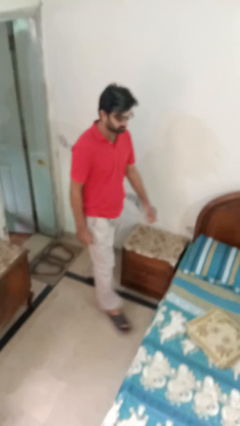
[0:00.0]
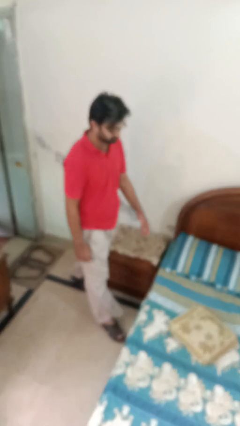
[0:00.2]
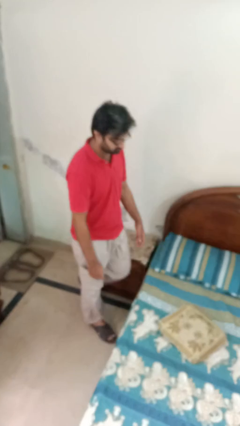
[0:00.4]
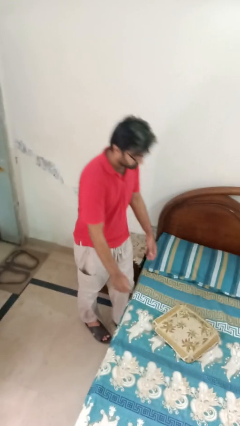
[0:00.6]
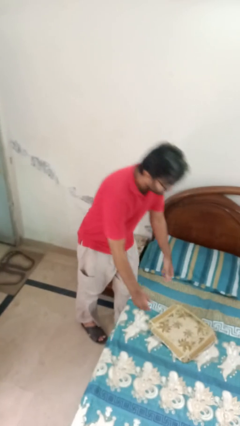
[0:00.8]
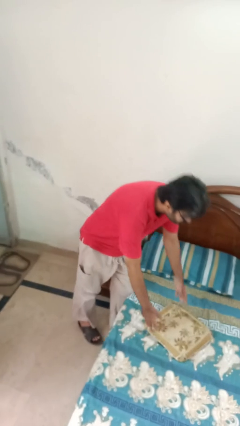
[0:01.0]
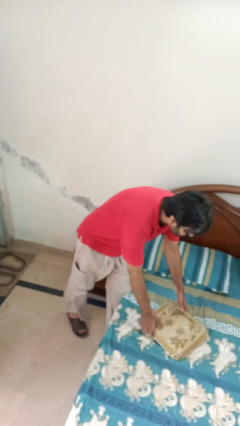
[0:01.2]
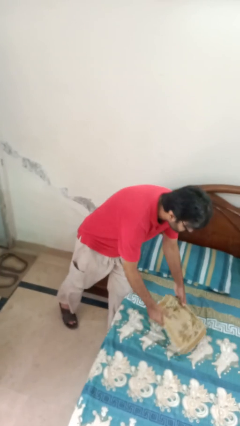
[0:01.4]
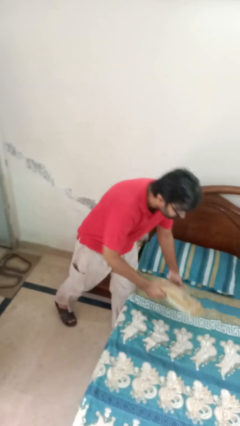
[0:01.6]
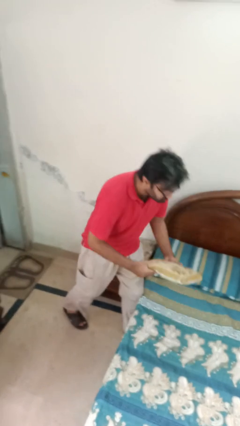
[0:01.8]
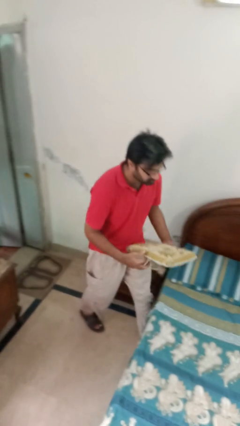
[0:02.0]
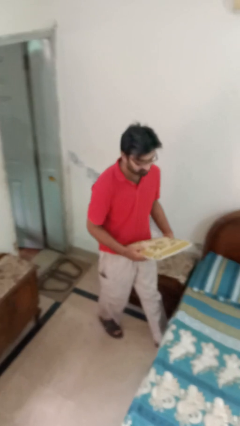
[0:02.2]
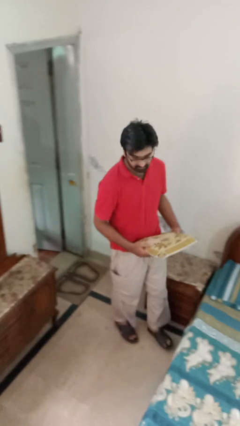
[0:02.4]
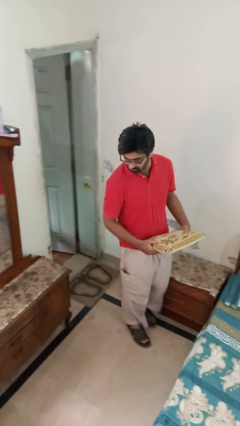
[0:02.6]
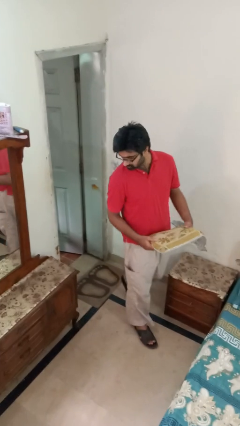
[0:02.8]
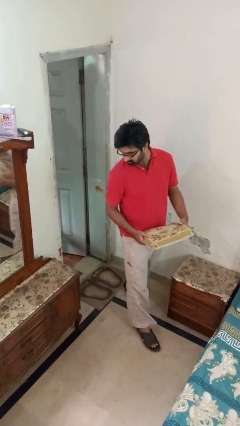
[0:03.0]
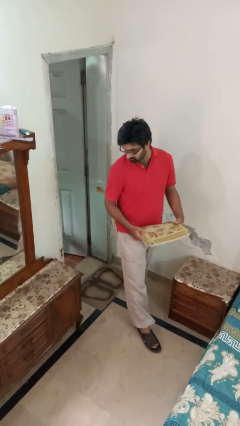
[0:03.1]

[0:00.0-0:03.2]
person picks up object from bed

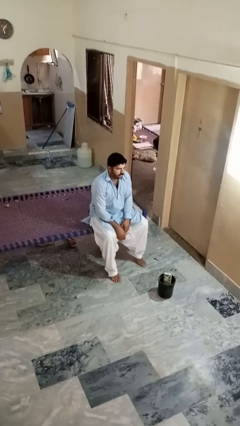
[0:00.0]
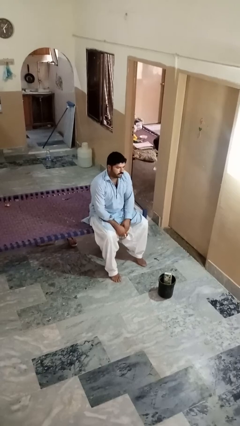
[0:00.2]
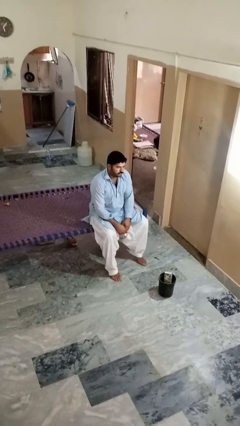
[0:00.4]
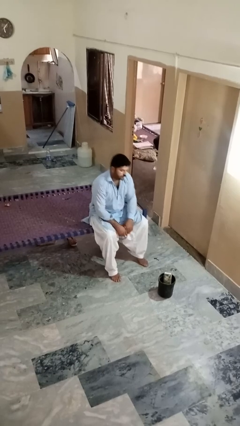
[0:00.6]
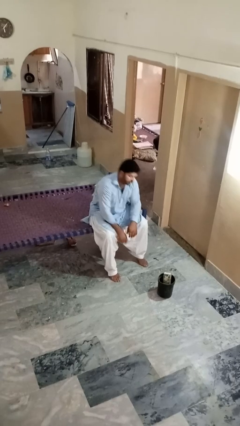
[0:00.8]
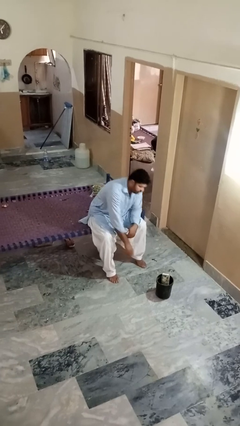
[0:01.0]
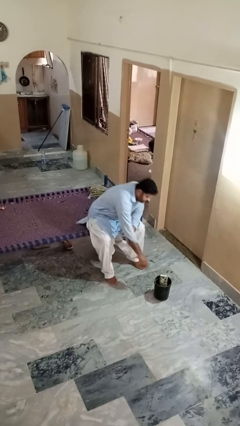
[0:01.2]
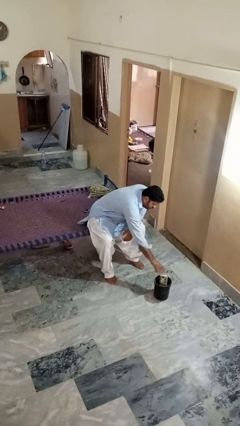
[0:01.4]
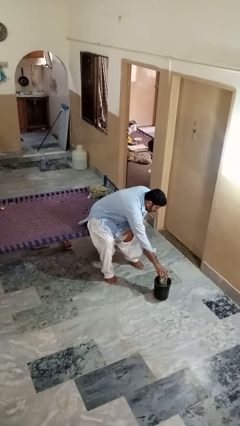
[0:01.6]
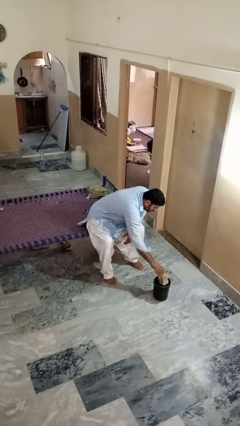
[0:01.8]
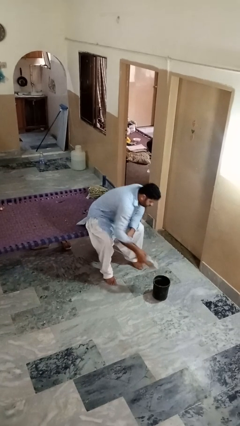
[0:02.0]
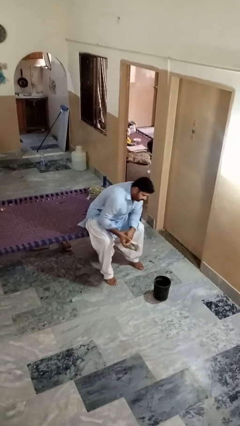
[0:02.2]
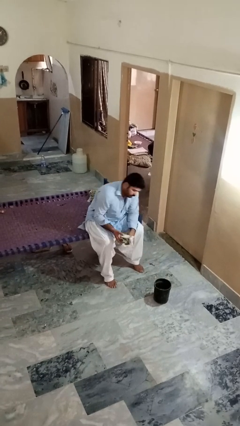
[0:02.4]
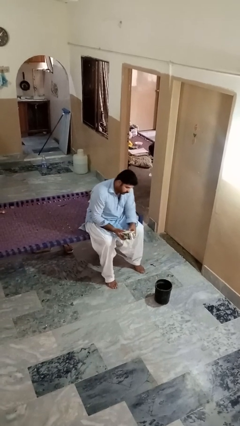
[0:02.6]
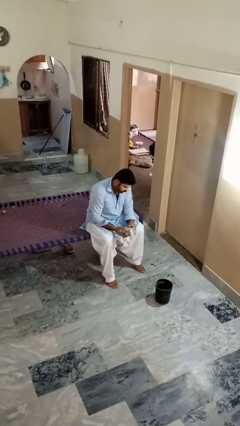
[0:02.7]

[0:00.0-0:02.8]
person takes object from basket

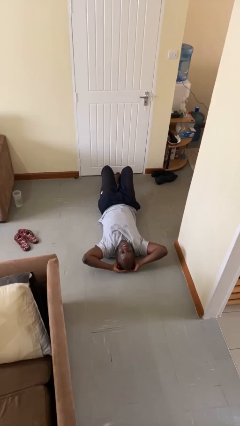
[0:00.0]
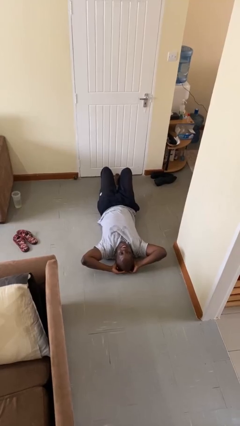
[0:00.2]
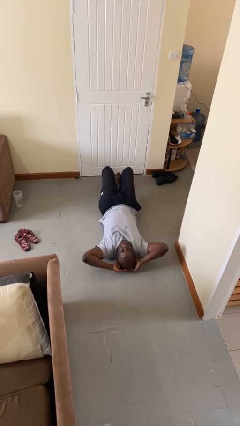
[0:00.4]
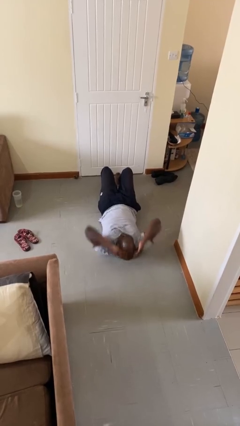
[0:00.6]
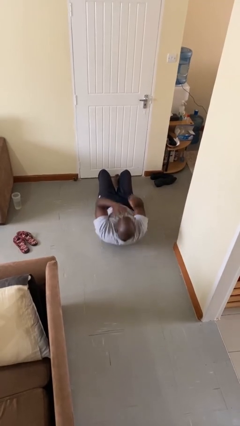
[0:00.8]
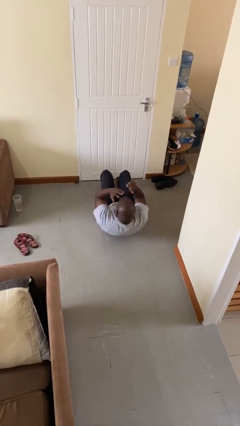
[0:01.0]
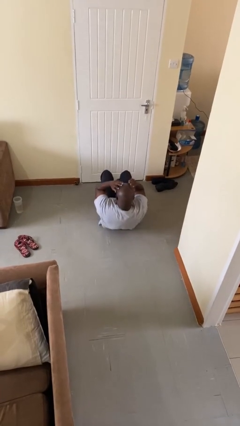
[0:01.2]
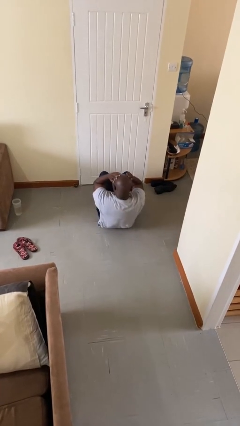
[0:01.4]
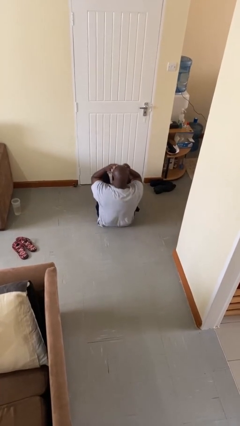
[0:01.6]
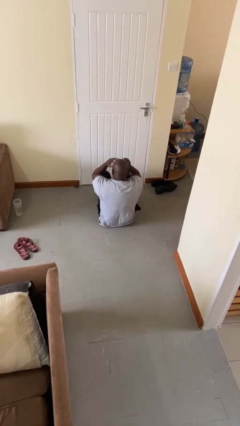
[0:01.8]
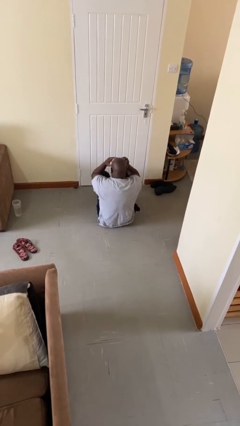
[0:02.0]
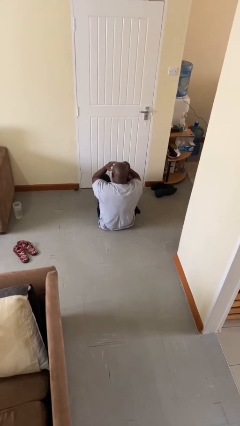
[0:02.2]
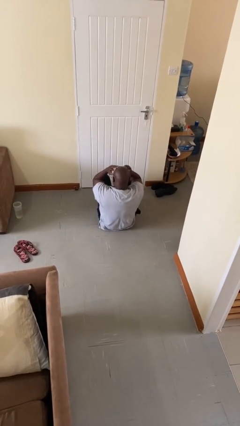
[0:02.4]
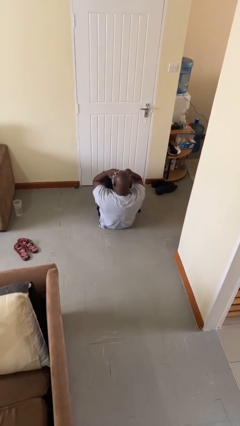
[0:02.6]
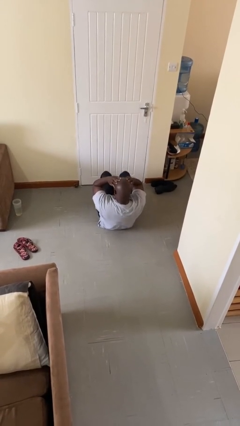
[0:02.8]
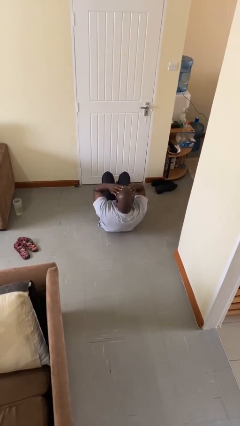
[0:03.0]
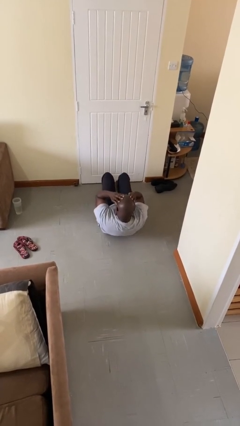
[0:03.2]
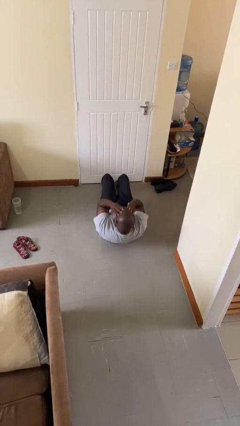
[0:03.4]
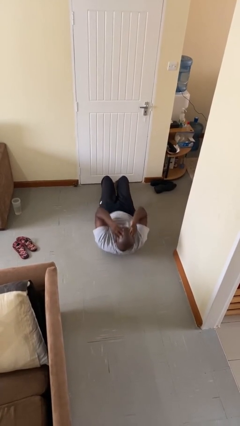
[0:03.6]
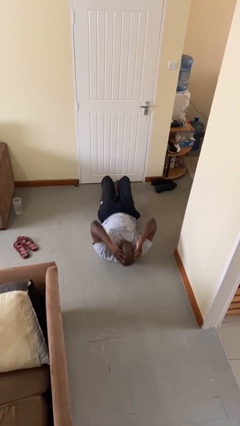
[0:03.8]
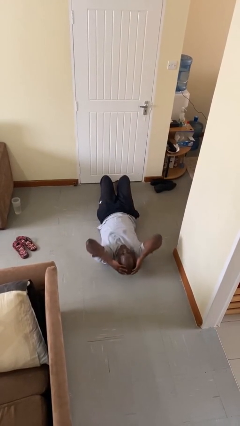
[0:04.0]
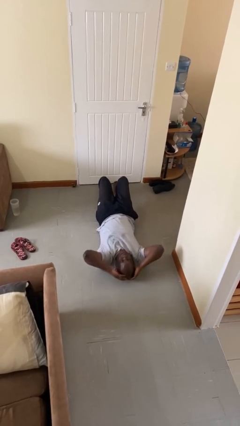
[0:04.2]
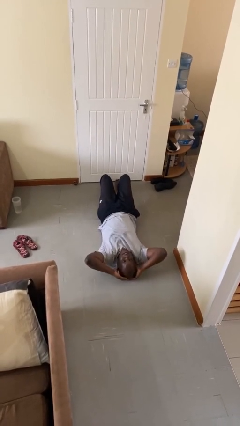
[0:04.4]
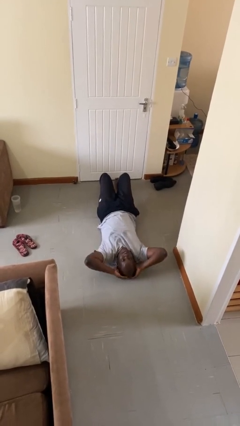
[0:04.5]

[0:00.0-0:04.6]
person exercises with situp

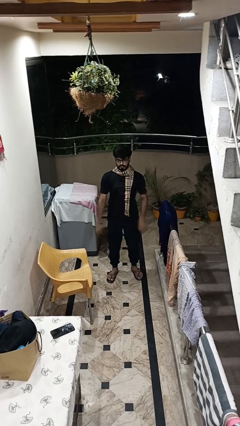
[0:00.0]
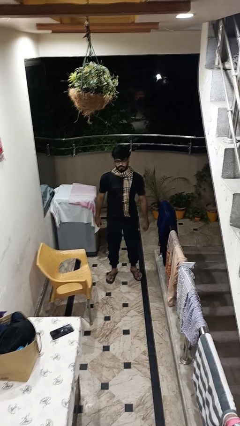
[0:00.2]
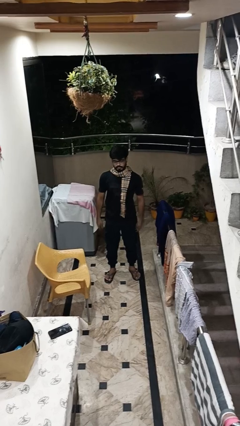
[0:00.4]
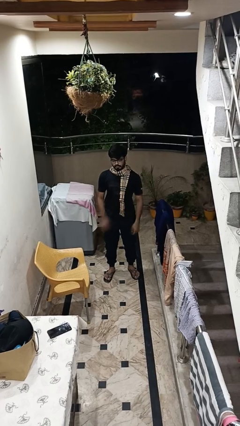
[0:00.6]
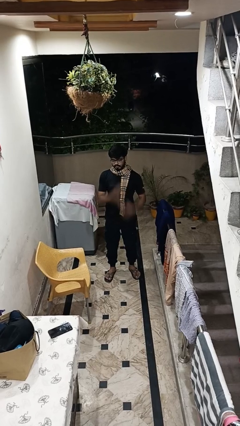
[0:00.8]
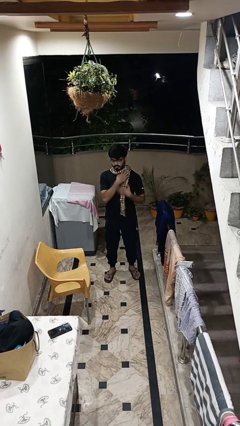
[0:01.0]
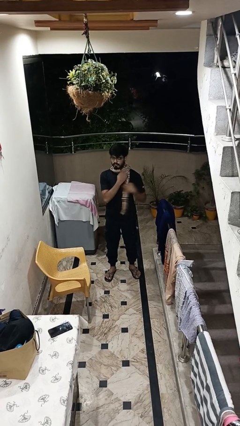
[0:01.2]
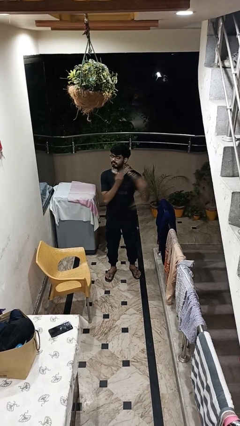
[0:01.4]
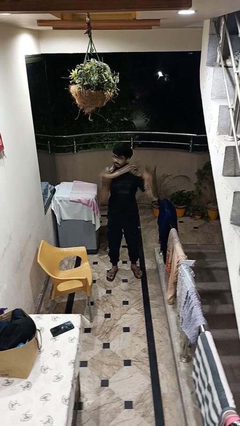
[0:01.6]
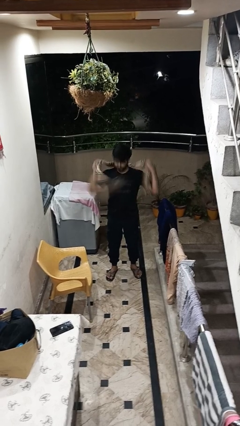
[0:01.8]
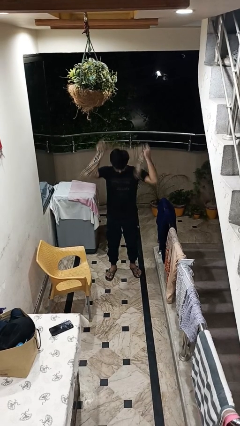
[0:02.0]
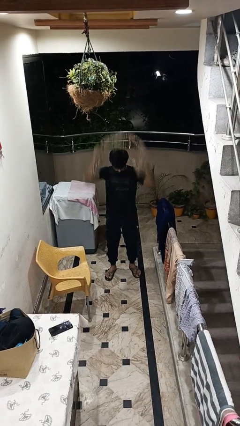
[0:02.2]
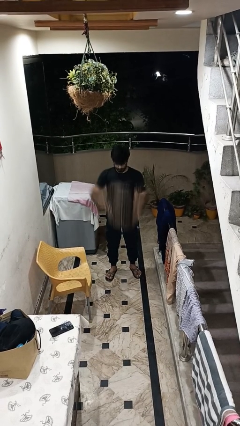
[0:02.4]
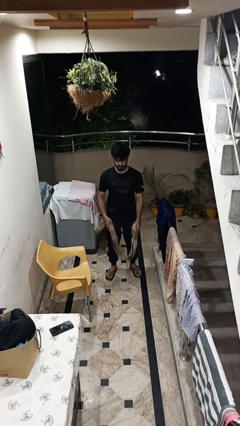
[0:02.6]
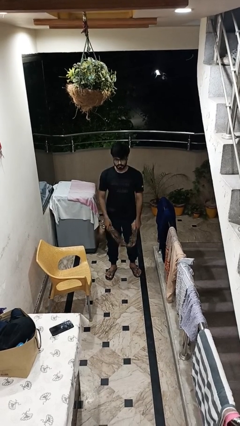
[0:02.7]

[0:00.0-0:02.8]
person takes off scarf

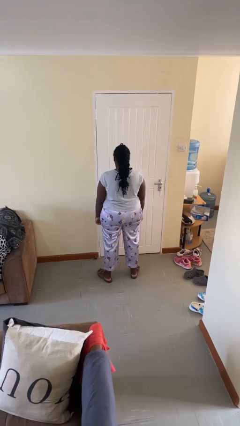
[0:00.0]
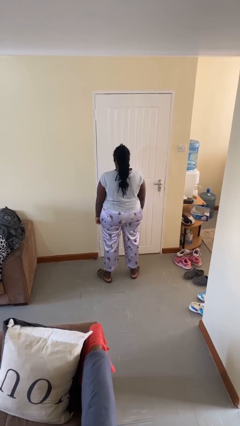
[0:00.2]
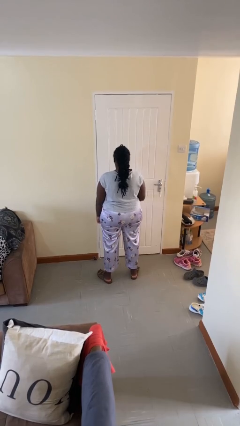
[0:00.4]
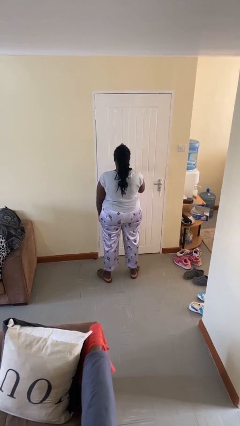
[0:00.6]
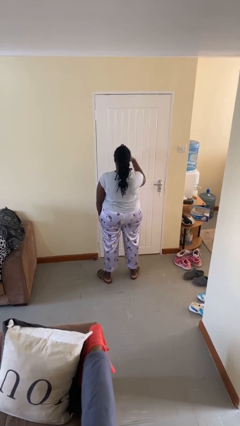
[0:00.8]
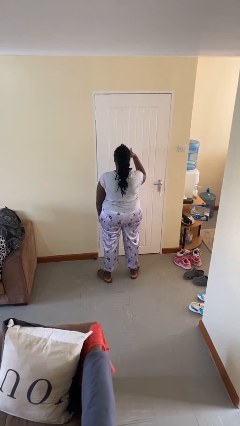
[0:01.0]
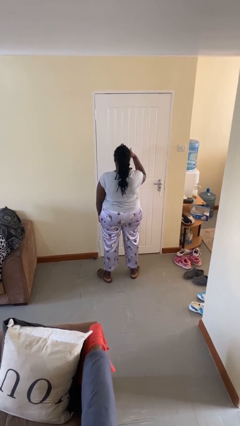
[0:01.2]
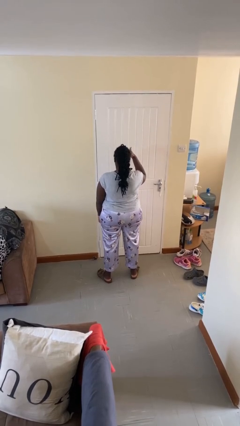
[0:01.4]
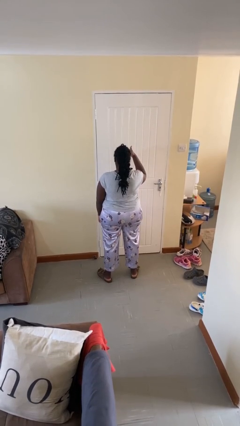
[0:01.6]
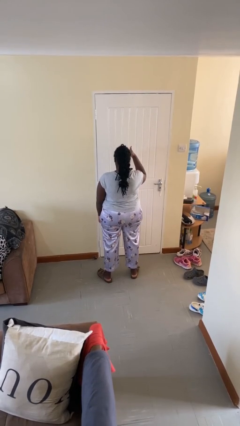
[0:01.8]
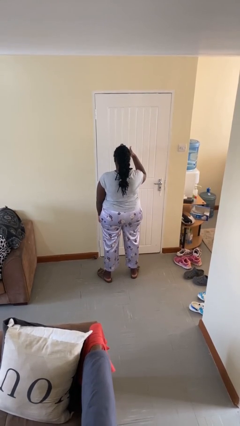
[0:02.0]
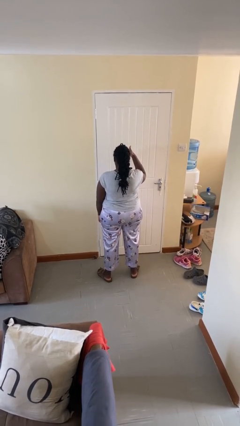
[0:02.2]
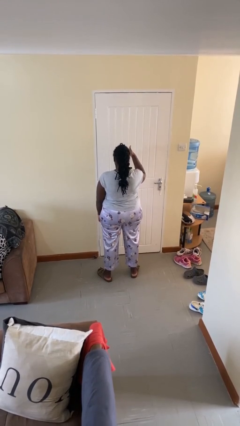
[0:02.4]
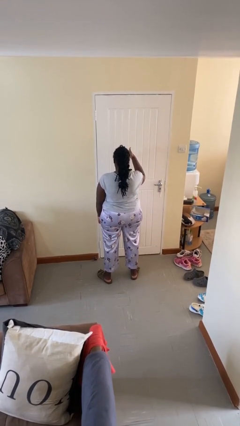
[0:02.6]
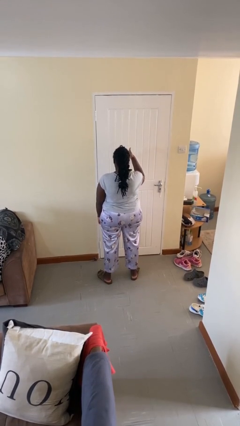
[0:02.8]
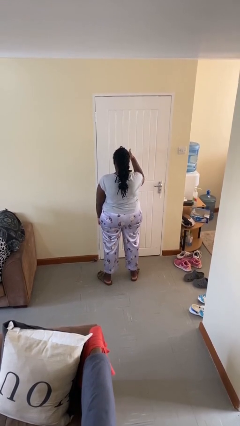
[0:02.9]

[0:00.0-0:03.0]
person gestures thumbs up

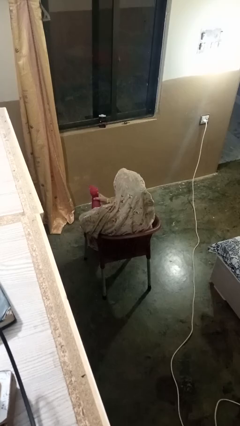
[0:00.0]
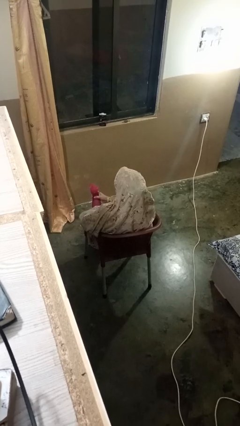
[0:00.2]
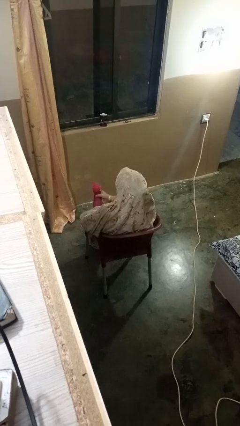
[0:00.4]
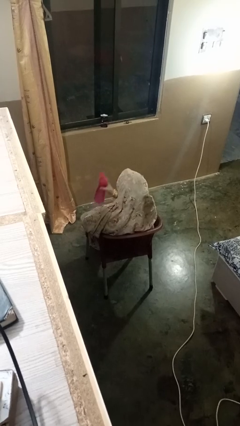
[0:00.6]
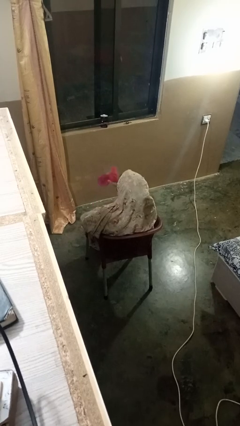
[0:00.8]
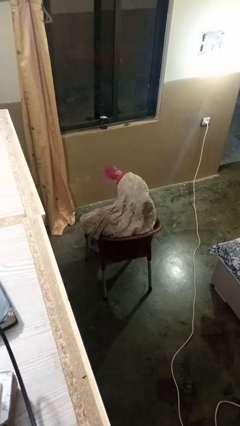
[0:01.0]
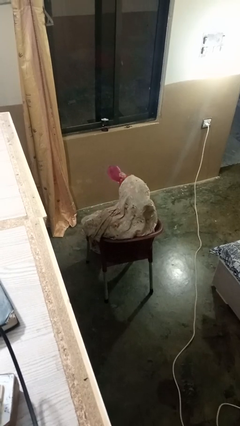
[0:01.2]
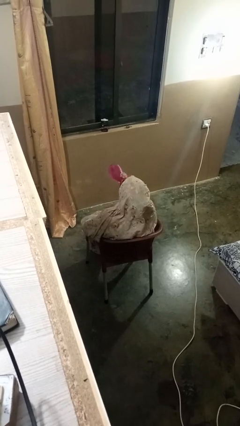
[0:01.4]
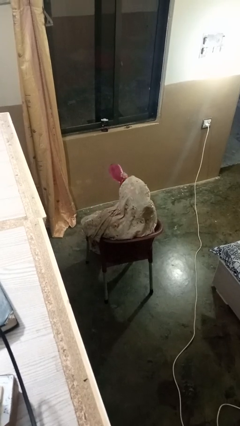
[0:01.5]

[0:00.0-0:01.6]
person drinks from bottle
